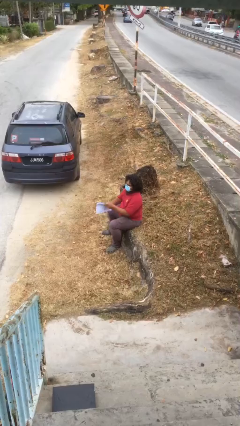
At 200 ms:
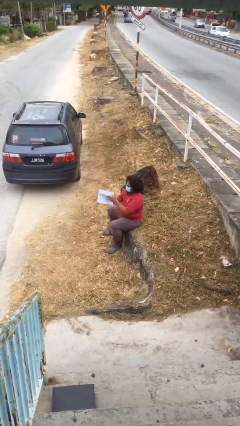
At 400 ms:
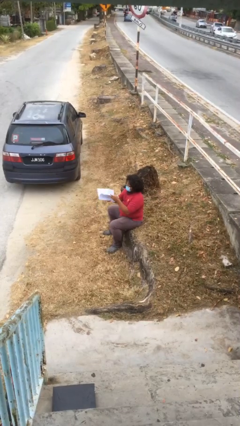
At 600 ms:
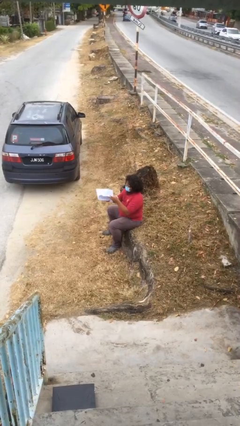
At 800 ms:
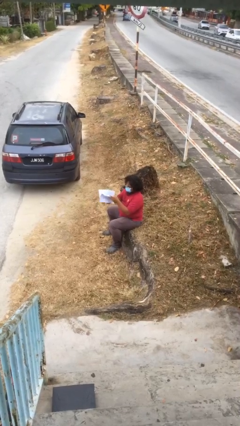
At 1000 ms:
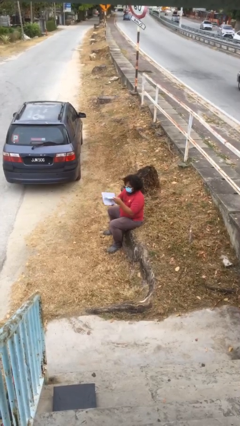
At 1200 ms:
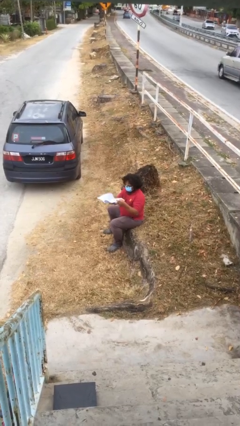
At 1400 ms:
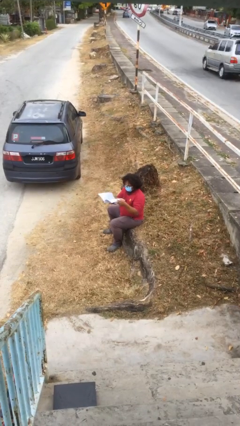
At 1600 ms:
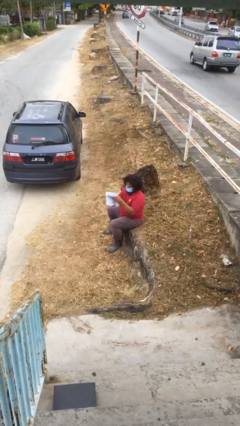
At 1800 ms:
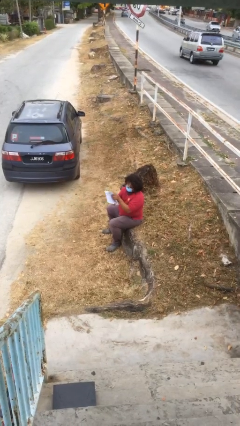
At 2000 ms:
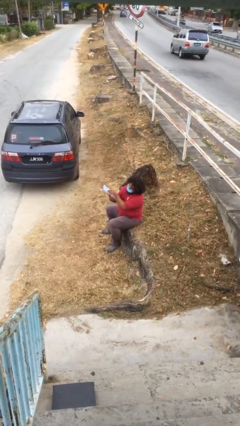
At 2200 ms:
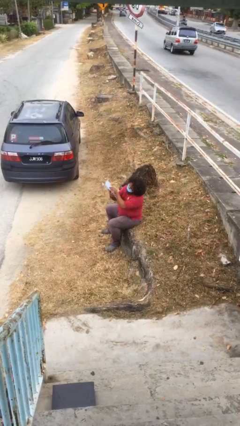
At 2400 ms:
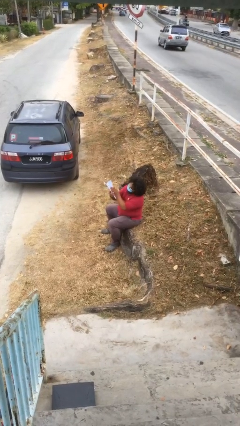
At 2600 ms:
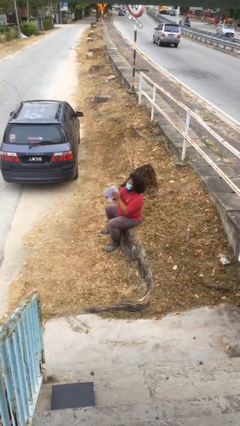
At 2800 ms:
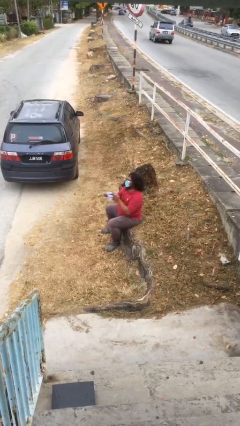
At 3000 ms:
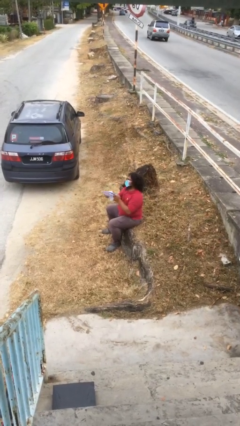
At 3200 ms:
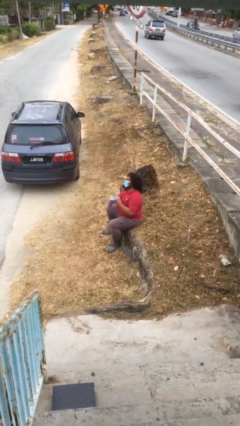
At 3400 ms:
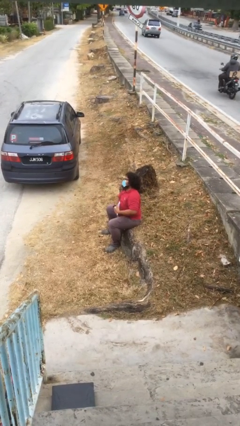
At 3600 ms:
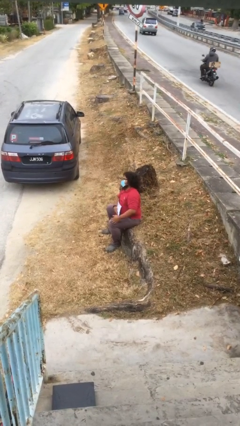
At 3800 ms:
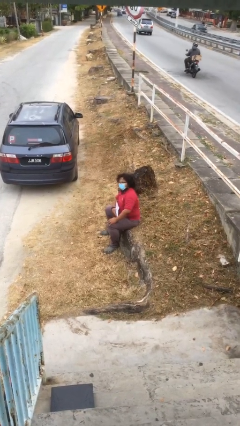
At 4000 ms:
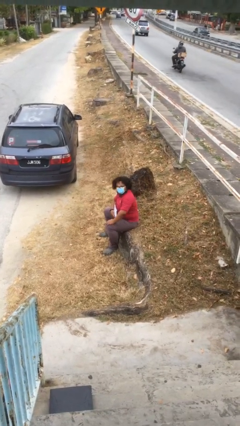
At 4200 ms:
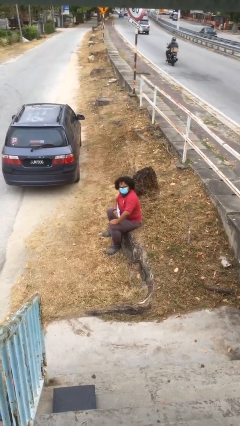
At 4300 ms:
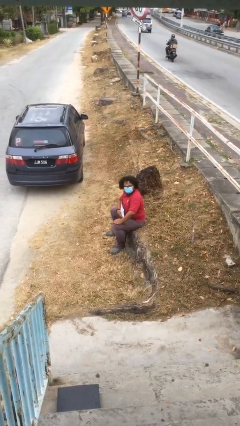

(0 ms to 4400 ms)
person reads document

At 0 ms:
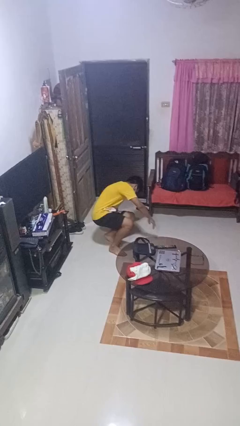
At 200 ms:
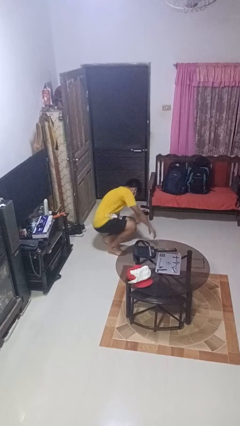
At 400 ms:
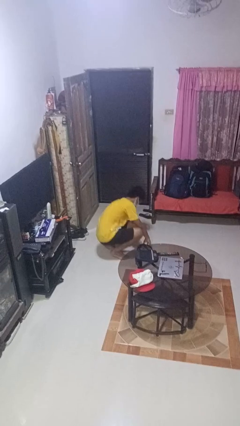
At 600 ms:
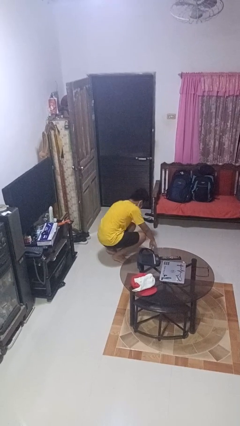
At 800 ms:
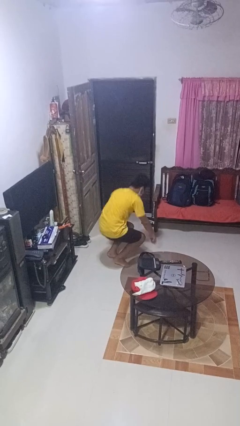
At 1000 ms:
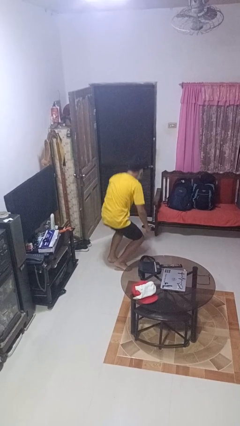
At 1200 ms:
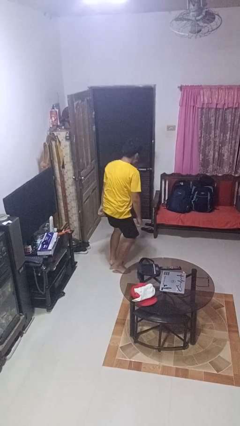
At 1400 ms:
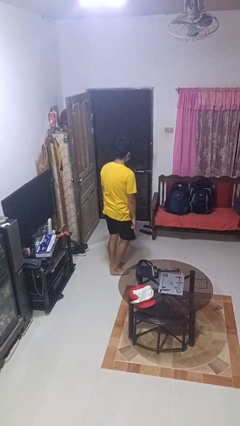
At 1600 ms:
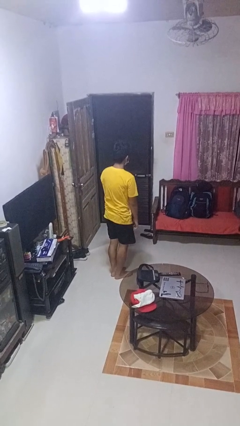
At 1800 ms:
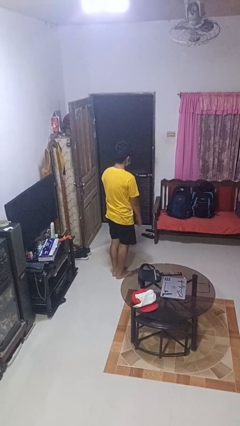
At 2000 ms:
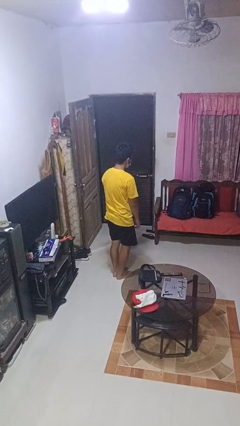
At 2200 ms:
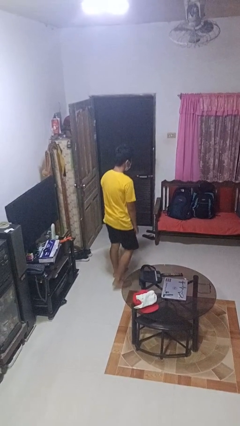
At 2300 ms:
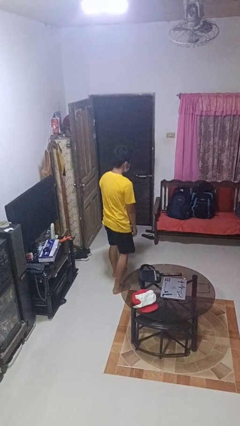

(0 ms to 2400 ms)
person stands up from floor

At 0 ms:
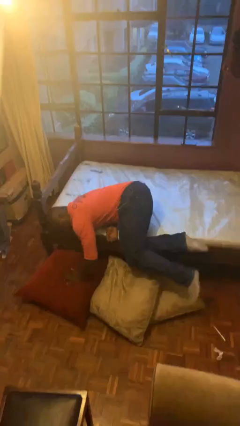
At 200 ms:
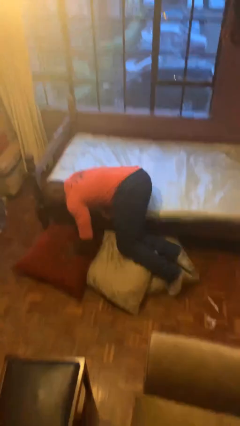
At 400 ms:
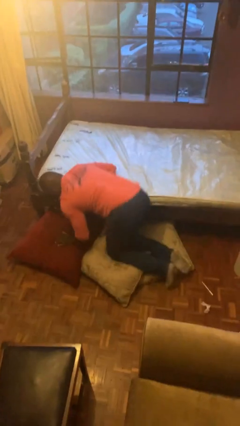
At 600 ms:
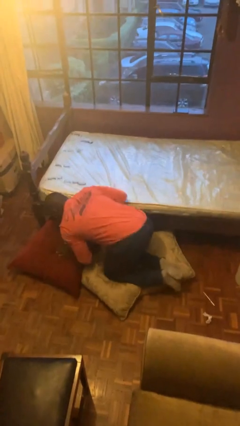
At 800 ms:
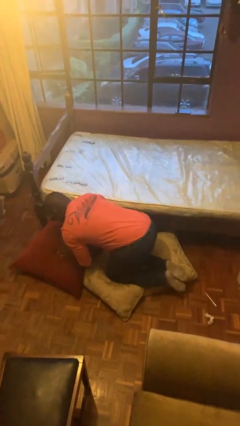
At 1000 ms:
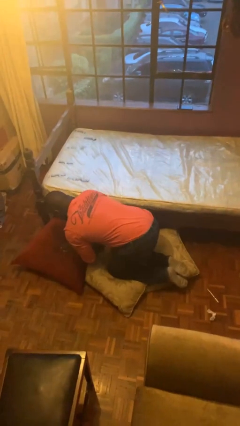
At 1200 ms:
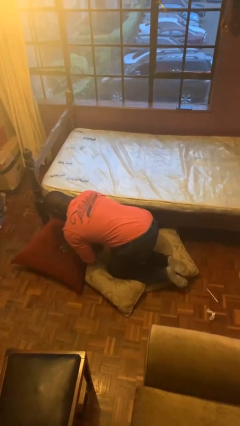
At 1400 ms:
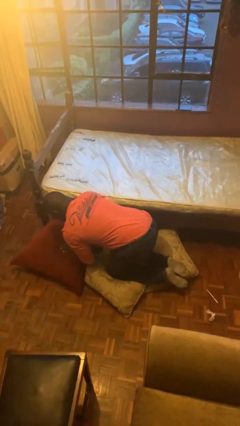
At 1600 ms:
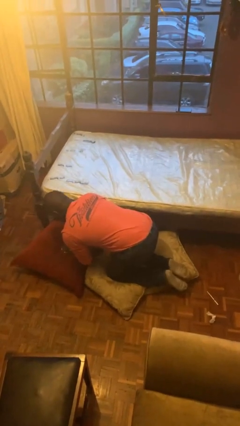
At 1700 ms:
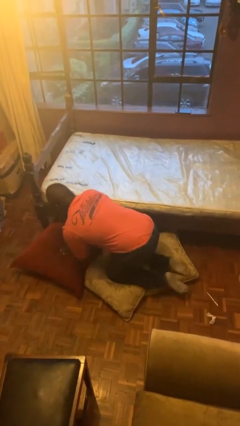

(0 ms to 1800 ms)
person falls from bed

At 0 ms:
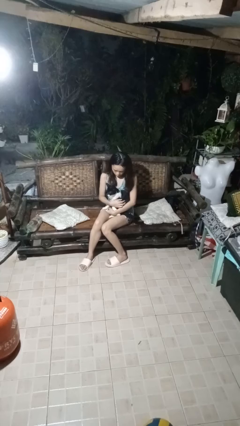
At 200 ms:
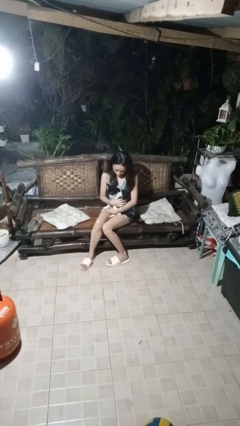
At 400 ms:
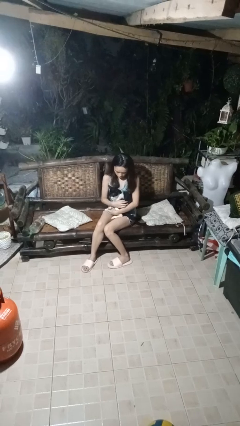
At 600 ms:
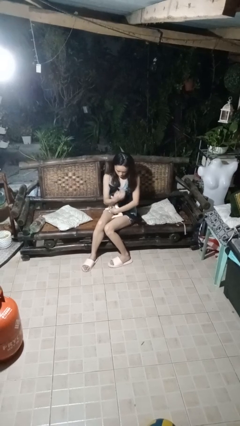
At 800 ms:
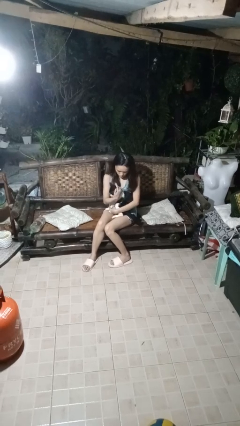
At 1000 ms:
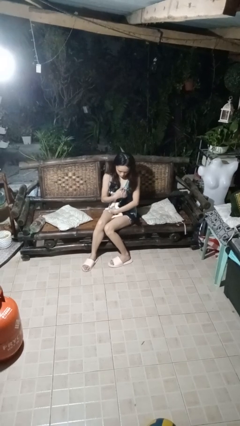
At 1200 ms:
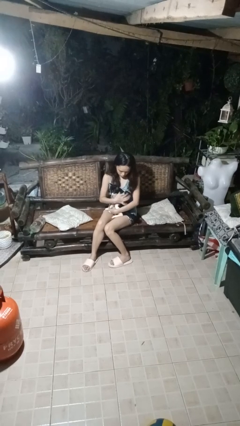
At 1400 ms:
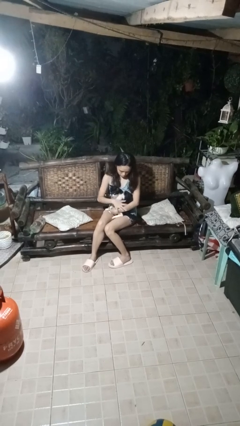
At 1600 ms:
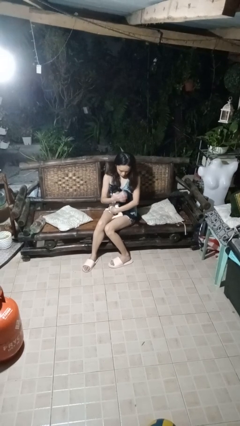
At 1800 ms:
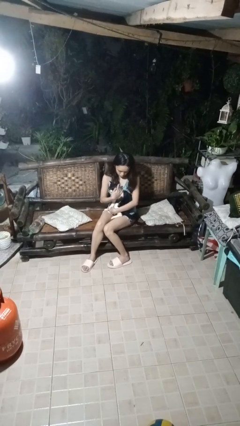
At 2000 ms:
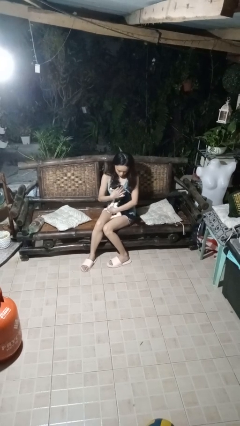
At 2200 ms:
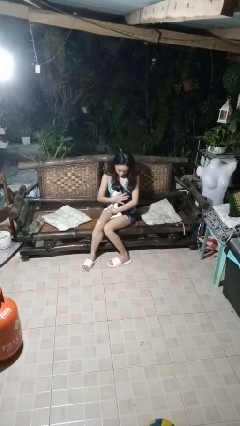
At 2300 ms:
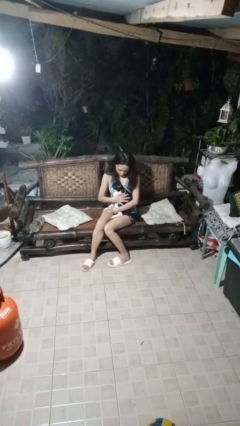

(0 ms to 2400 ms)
person pets cat

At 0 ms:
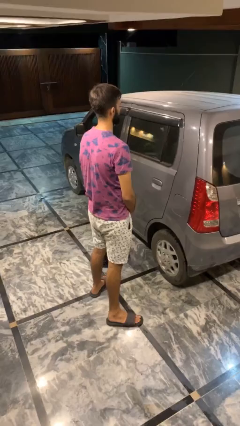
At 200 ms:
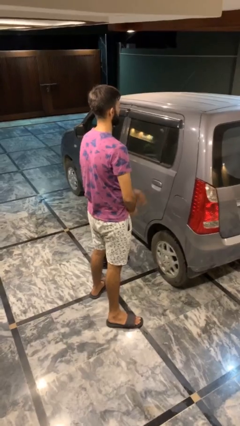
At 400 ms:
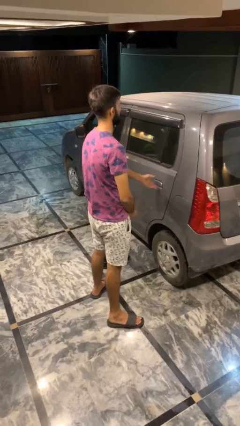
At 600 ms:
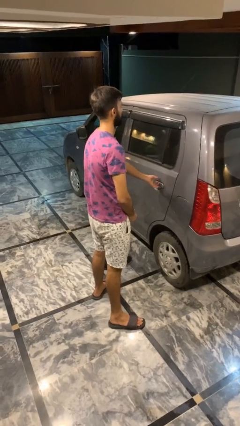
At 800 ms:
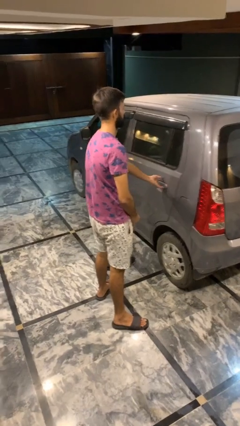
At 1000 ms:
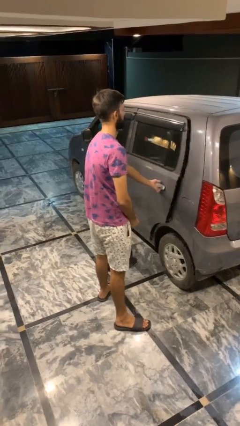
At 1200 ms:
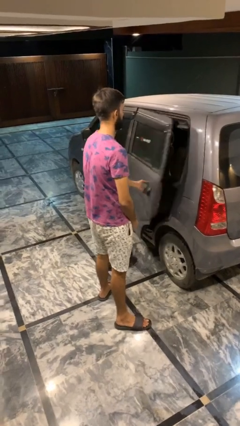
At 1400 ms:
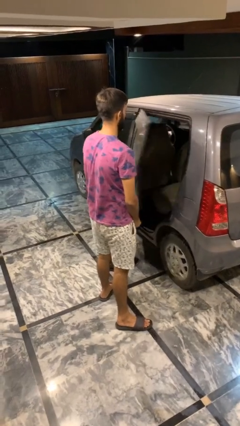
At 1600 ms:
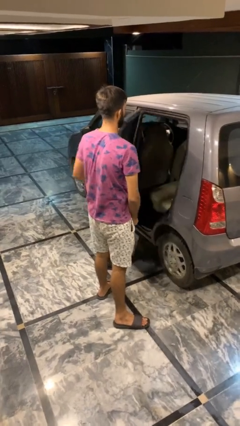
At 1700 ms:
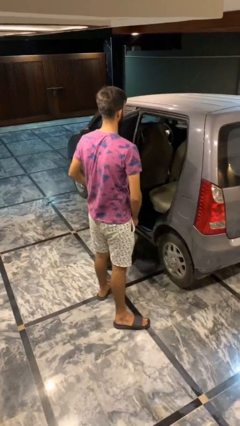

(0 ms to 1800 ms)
person opens car door

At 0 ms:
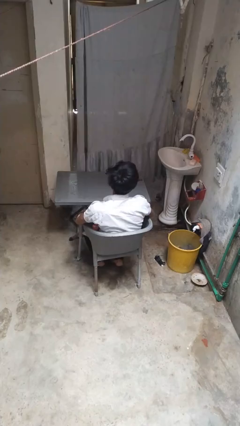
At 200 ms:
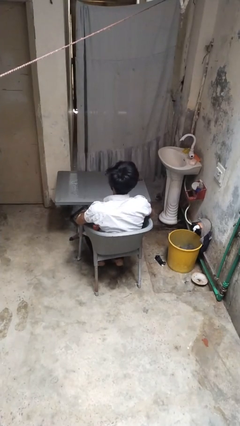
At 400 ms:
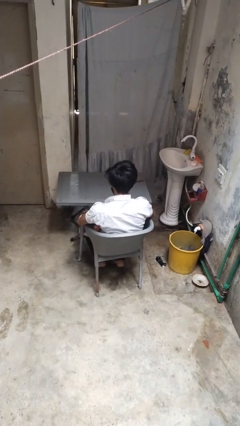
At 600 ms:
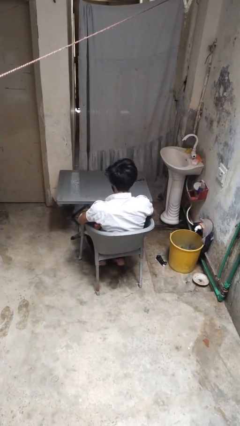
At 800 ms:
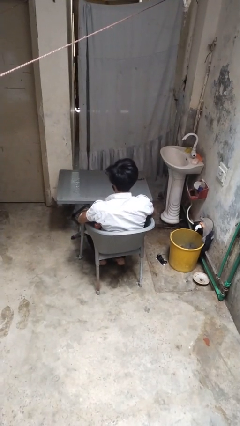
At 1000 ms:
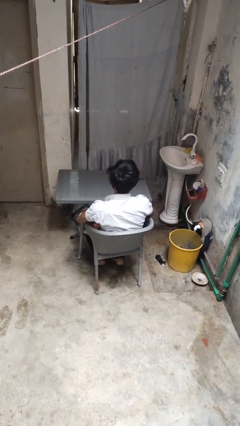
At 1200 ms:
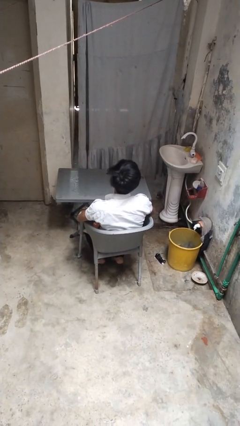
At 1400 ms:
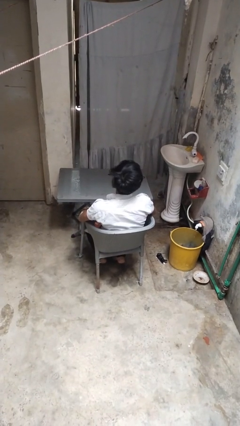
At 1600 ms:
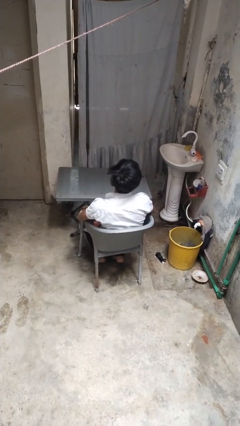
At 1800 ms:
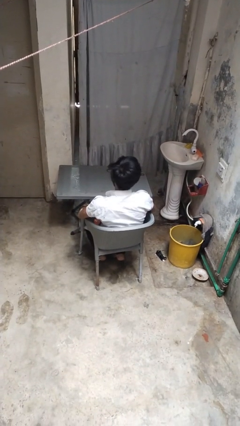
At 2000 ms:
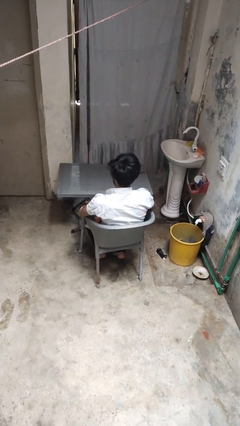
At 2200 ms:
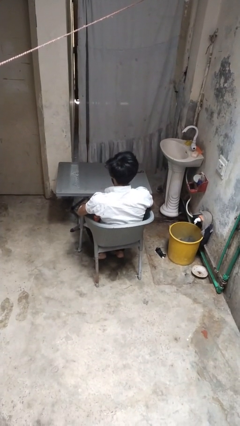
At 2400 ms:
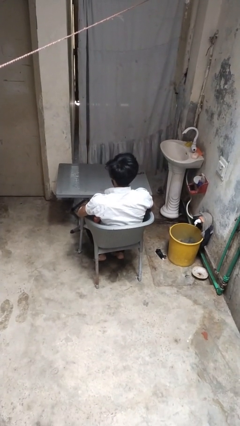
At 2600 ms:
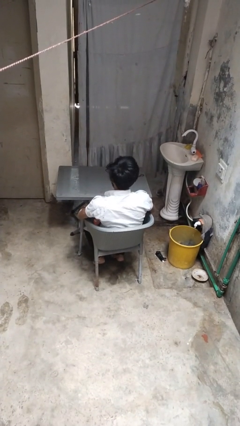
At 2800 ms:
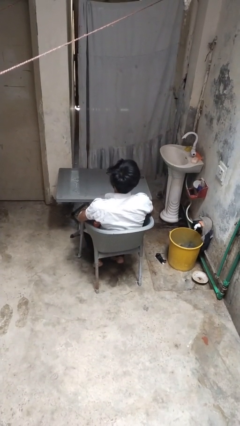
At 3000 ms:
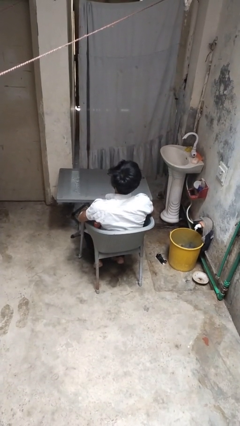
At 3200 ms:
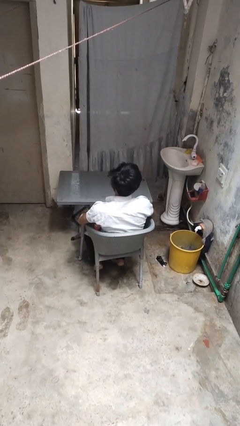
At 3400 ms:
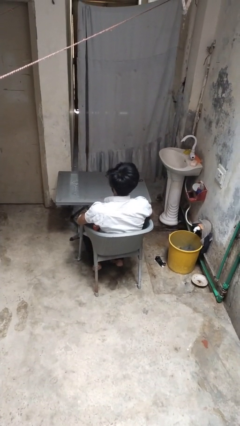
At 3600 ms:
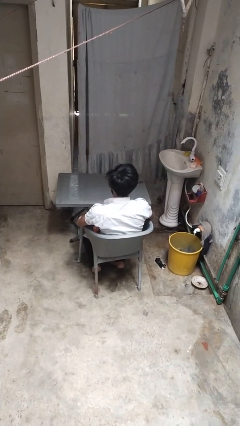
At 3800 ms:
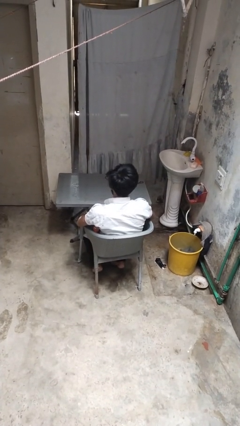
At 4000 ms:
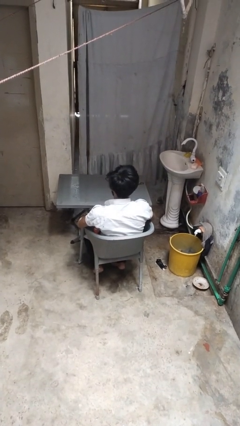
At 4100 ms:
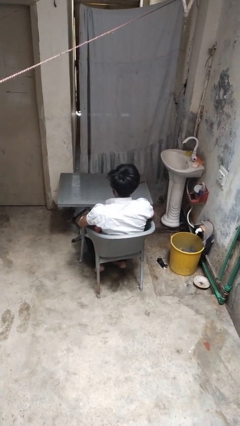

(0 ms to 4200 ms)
person nods head

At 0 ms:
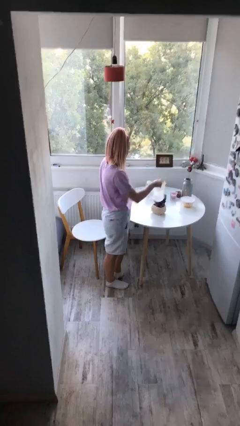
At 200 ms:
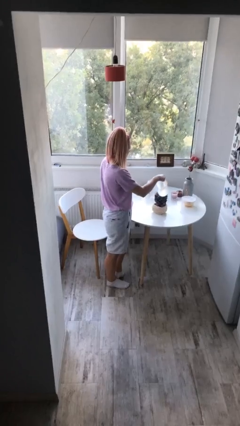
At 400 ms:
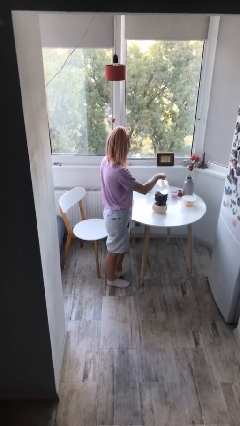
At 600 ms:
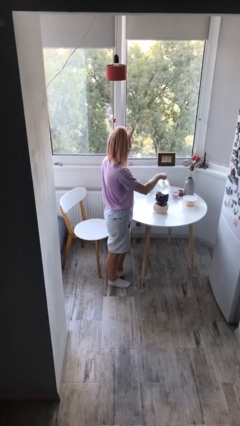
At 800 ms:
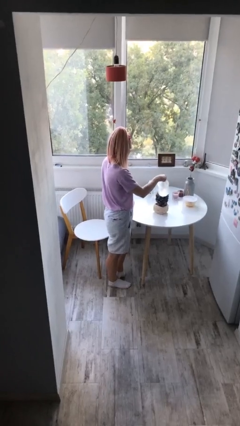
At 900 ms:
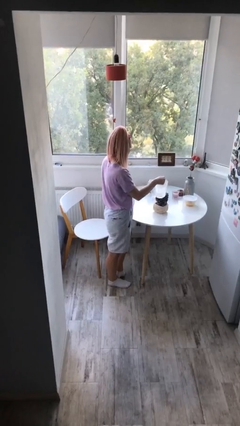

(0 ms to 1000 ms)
person waters houseplant
